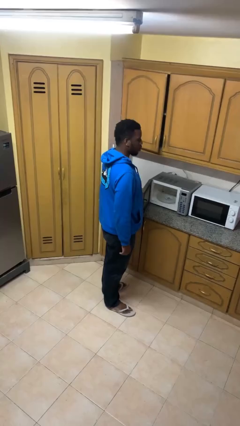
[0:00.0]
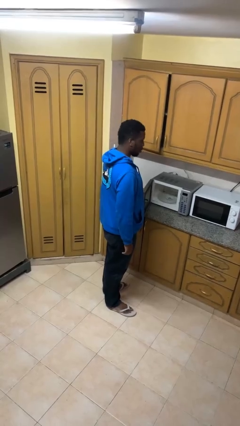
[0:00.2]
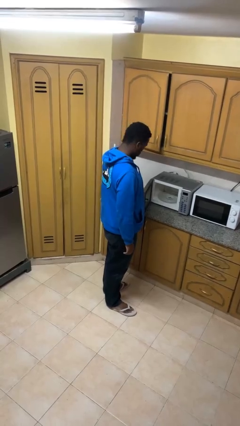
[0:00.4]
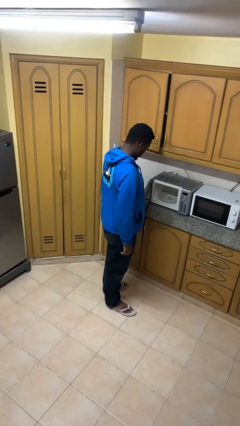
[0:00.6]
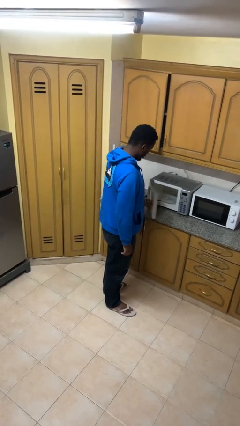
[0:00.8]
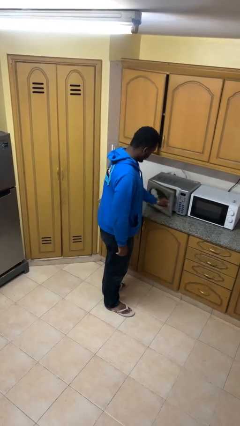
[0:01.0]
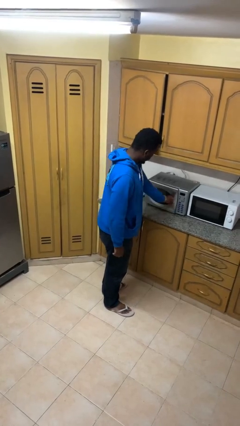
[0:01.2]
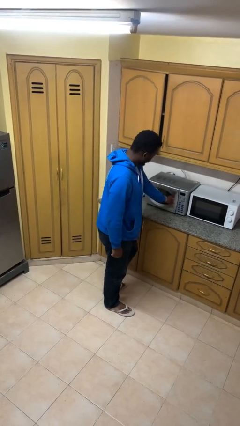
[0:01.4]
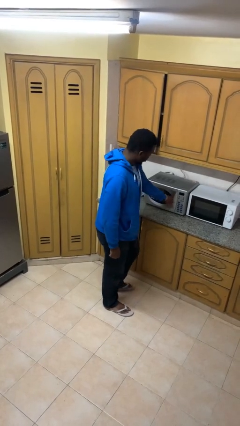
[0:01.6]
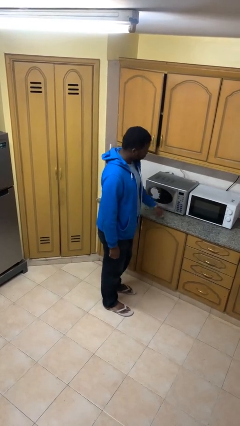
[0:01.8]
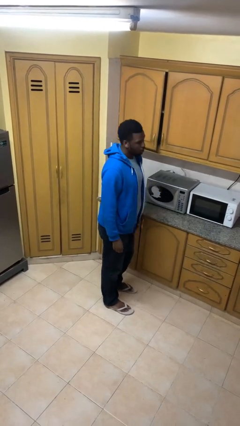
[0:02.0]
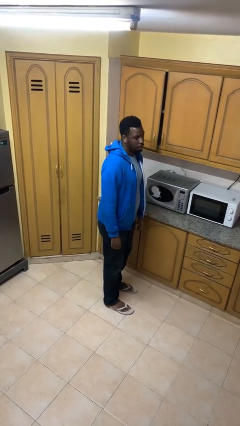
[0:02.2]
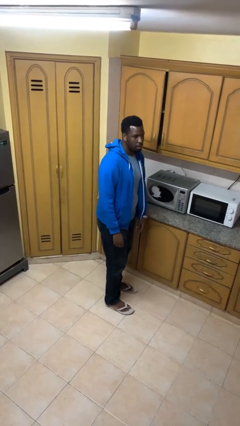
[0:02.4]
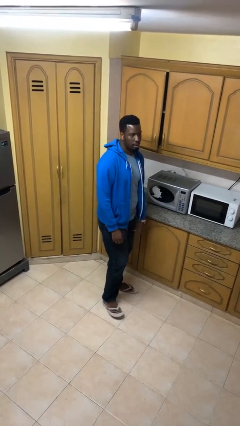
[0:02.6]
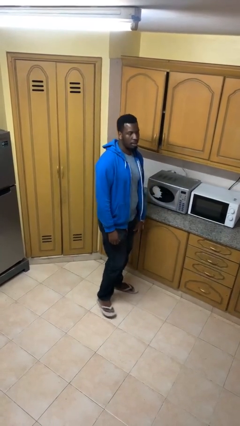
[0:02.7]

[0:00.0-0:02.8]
person closes microwave

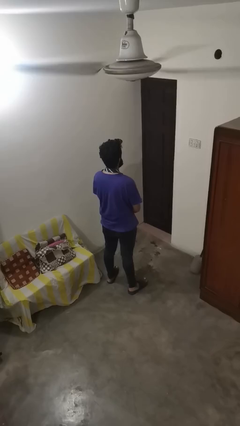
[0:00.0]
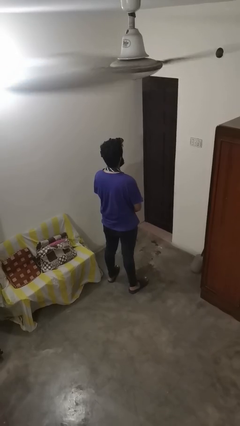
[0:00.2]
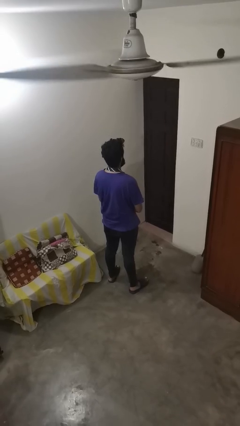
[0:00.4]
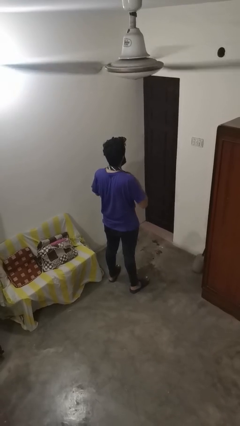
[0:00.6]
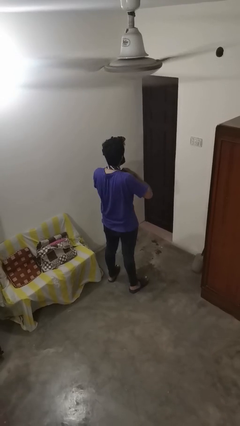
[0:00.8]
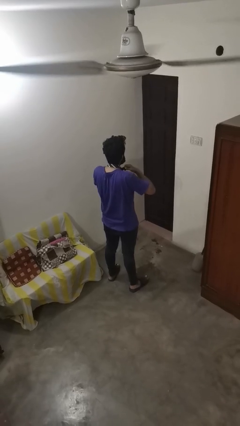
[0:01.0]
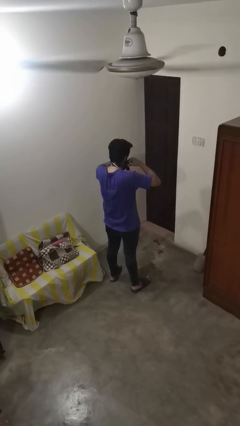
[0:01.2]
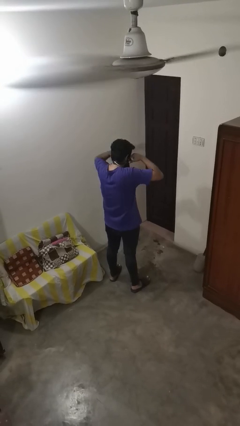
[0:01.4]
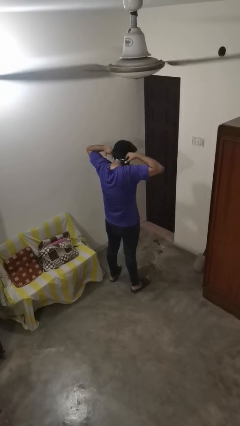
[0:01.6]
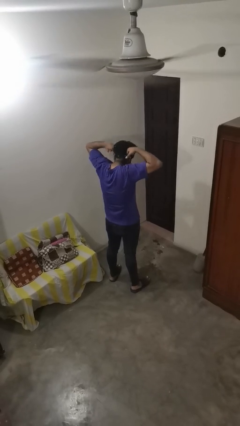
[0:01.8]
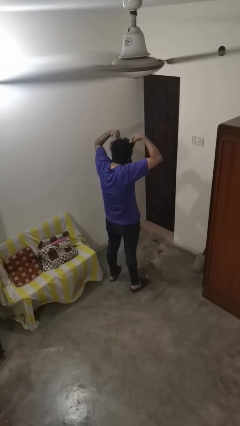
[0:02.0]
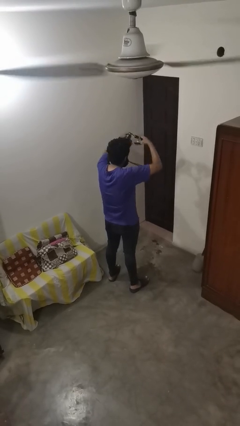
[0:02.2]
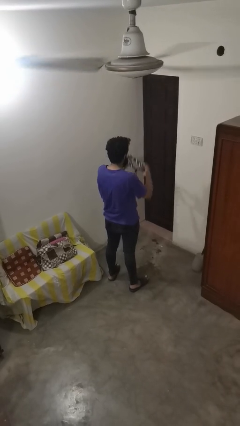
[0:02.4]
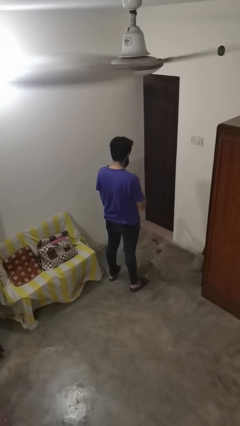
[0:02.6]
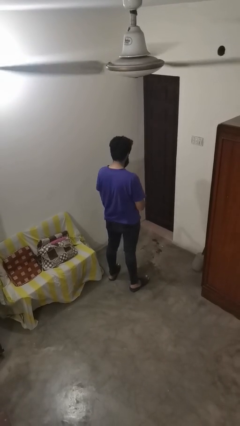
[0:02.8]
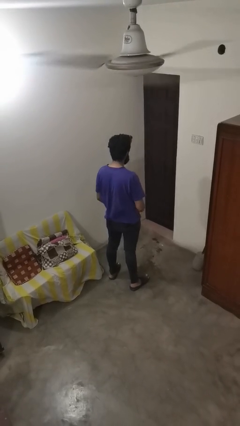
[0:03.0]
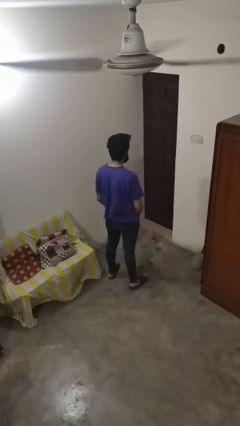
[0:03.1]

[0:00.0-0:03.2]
person takes off necktie

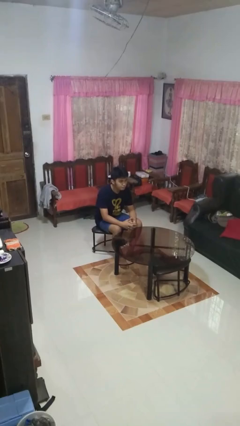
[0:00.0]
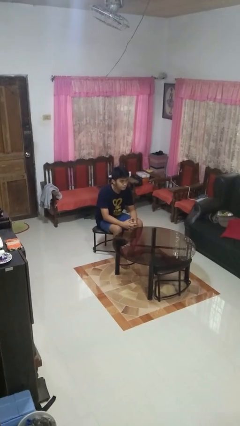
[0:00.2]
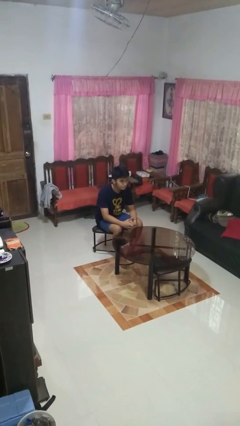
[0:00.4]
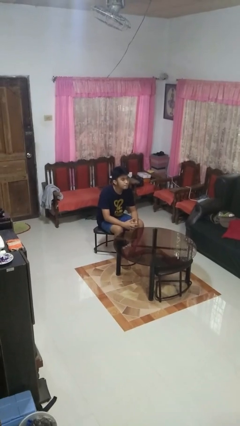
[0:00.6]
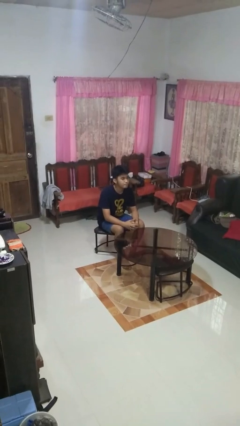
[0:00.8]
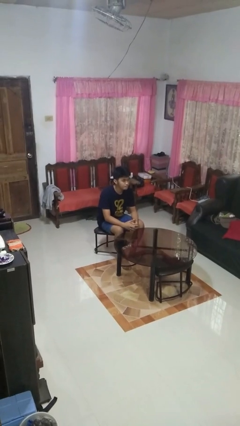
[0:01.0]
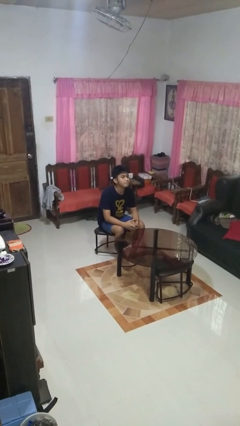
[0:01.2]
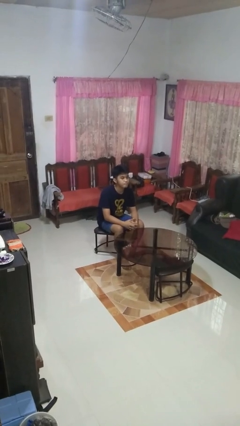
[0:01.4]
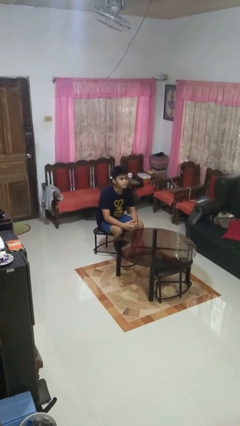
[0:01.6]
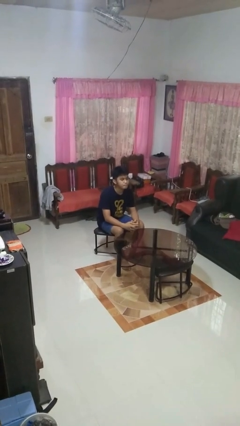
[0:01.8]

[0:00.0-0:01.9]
person nods head

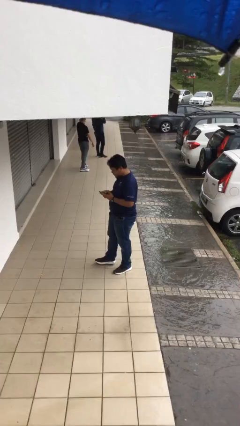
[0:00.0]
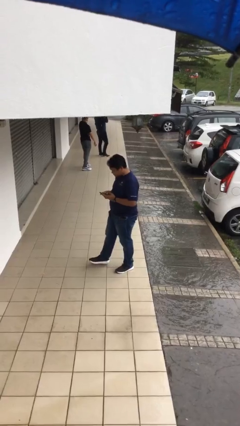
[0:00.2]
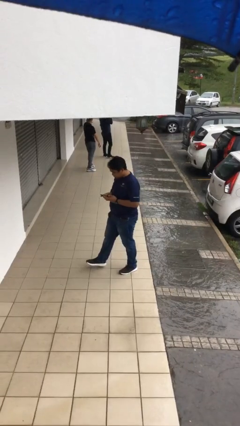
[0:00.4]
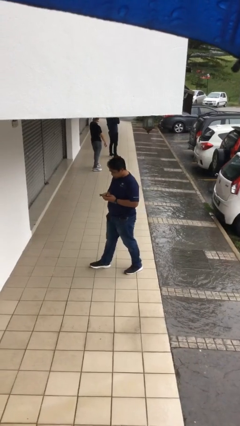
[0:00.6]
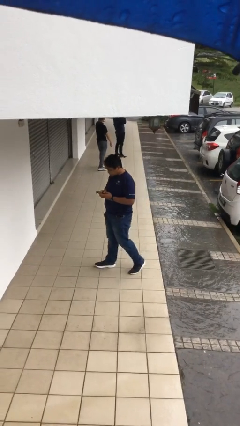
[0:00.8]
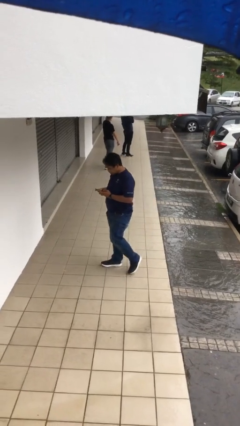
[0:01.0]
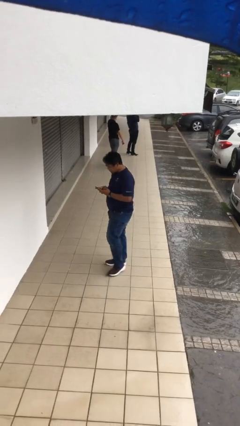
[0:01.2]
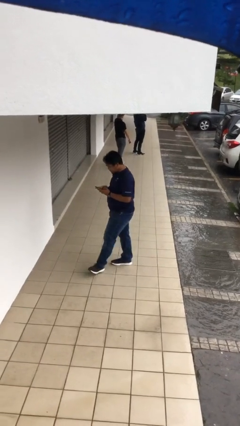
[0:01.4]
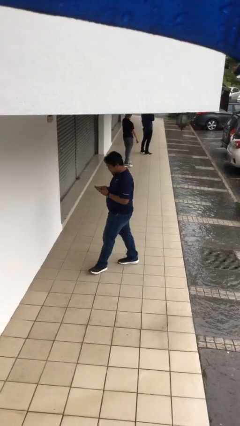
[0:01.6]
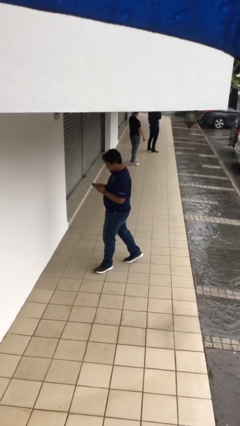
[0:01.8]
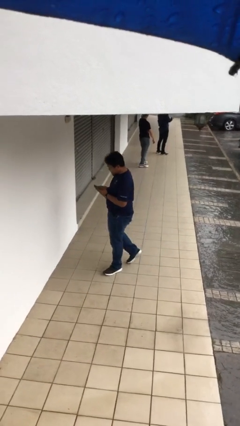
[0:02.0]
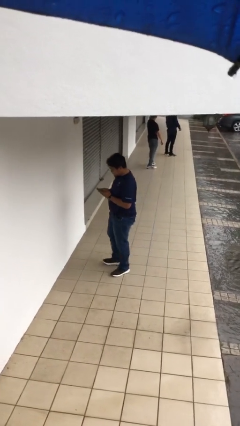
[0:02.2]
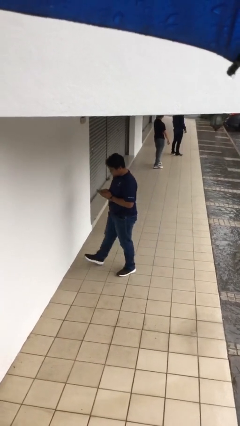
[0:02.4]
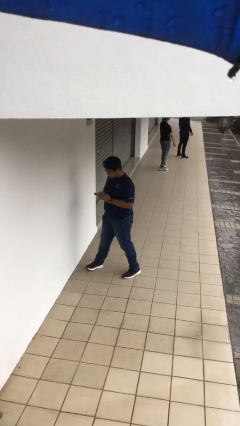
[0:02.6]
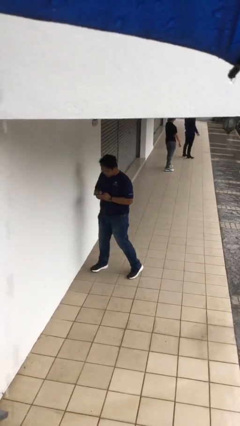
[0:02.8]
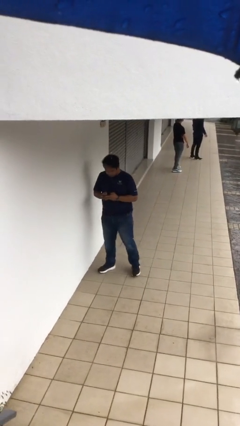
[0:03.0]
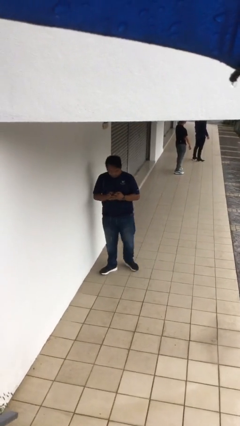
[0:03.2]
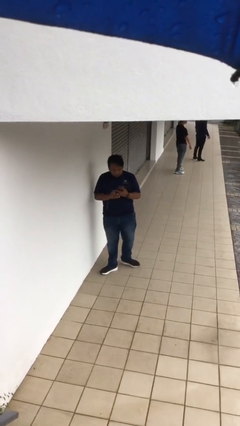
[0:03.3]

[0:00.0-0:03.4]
person texts on phone

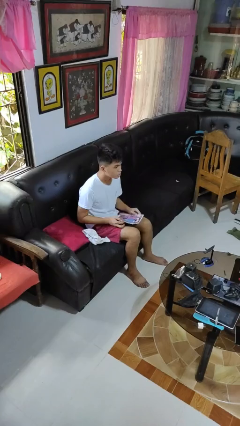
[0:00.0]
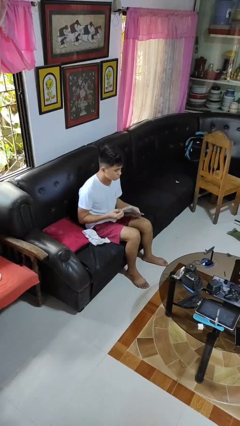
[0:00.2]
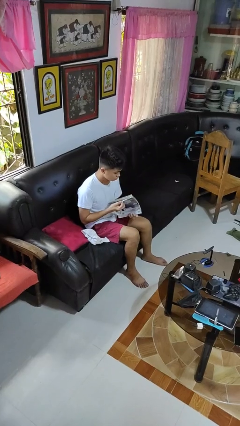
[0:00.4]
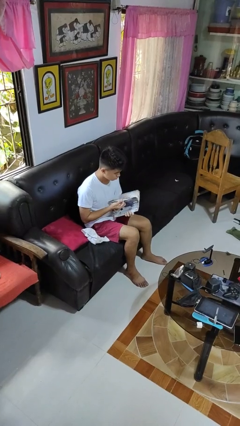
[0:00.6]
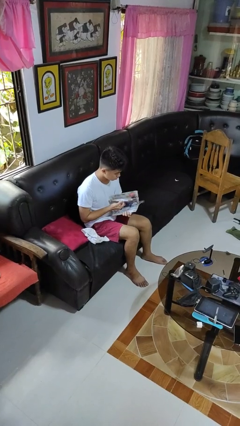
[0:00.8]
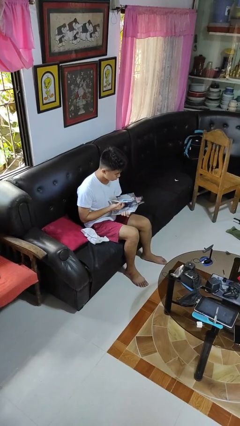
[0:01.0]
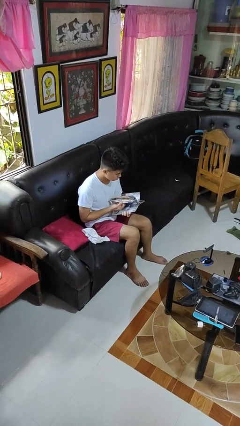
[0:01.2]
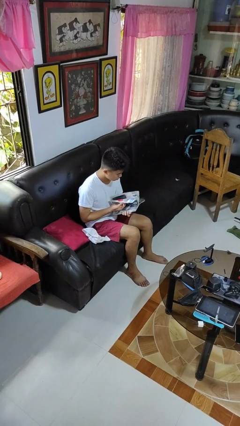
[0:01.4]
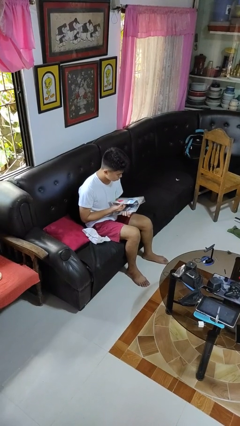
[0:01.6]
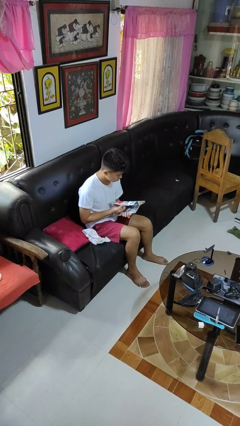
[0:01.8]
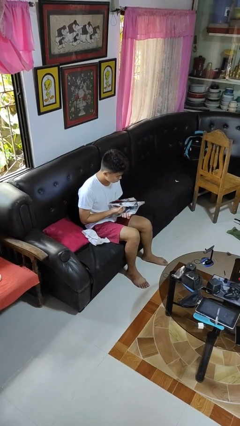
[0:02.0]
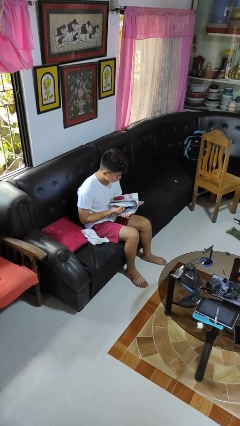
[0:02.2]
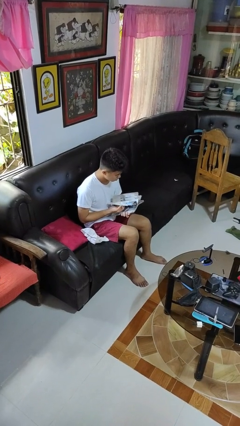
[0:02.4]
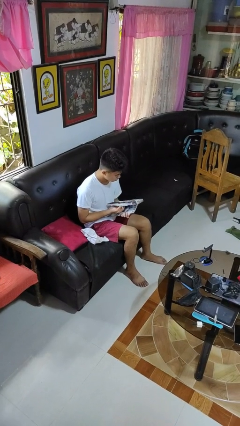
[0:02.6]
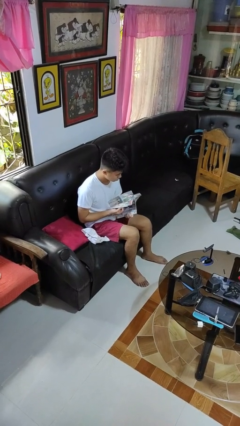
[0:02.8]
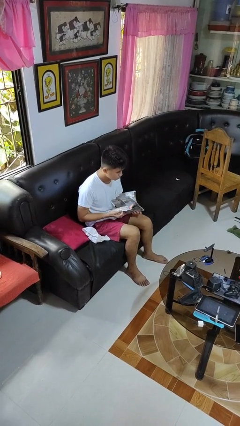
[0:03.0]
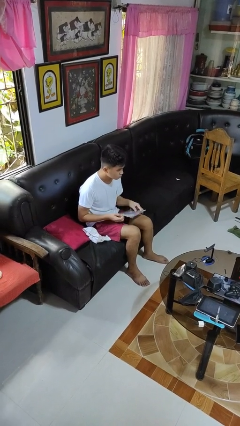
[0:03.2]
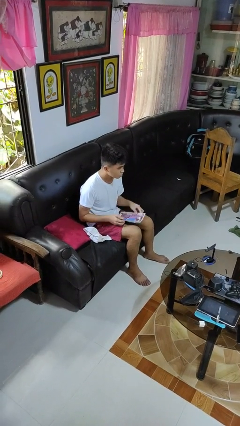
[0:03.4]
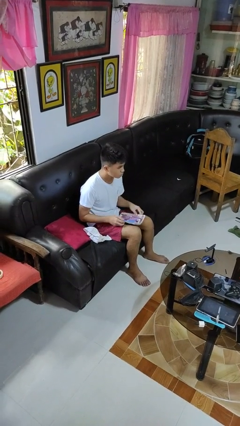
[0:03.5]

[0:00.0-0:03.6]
person reads magazine

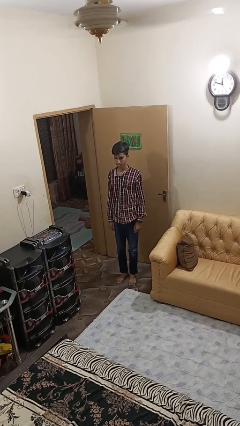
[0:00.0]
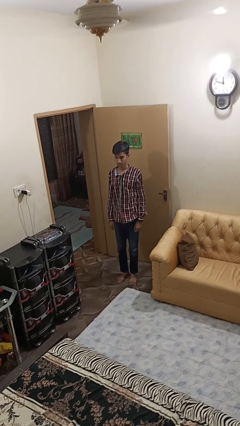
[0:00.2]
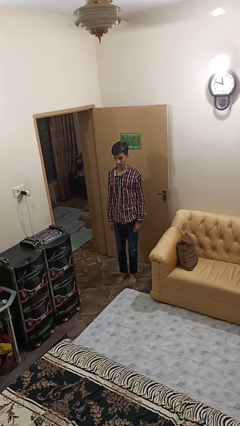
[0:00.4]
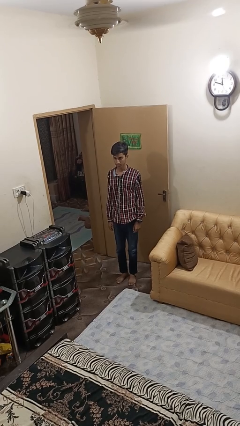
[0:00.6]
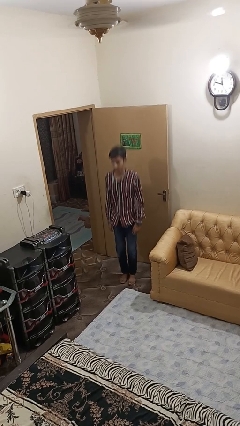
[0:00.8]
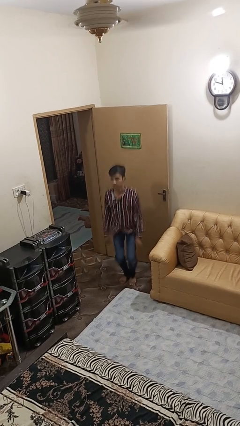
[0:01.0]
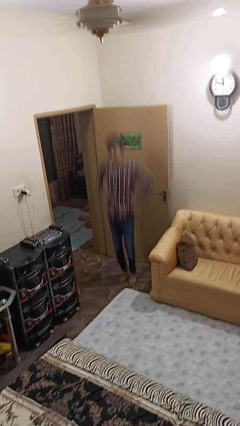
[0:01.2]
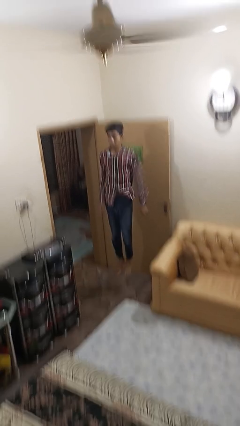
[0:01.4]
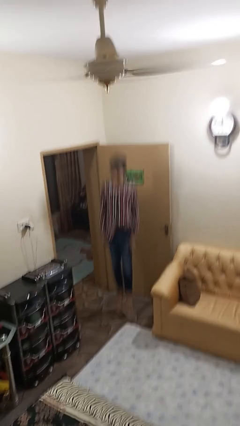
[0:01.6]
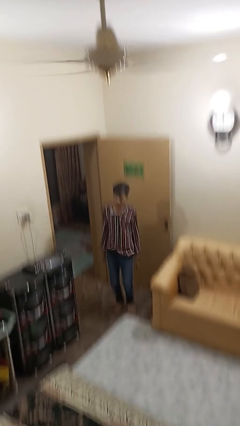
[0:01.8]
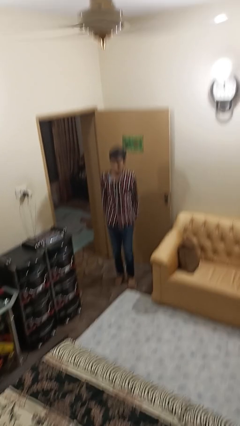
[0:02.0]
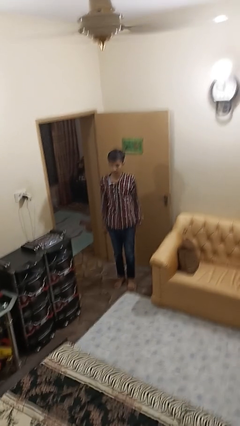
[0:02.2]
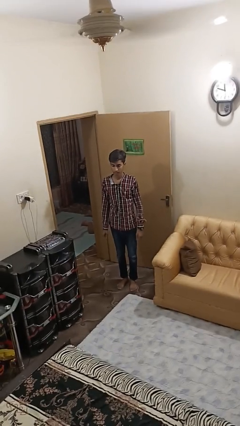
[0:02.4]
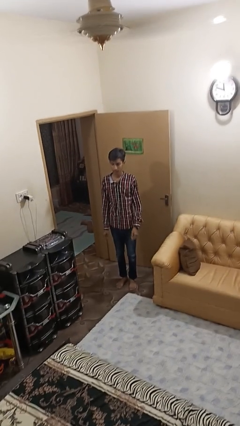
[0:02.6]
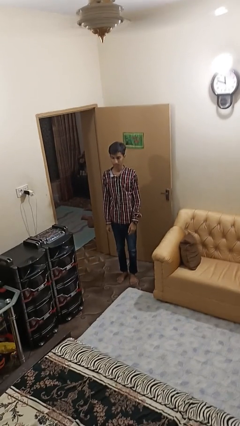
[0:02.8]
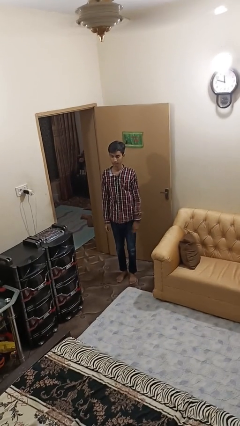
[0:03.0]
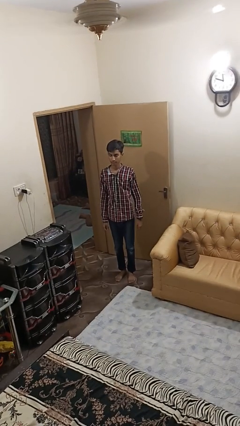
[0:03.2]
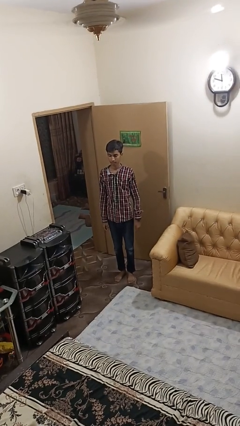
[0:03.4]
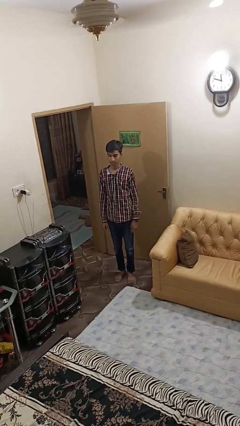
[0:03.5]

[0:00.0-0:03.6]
person jumps
